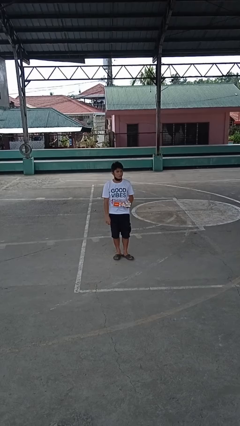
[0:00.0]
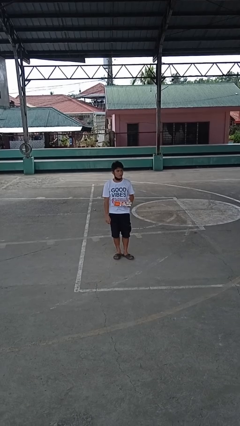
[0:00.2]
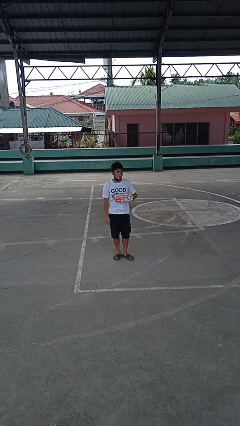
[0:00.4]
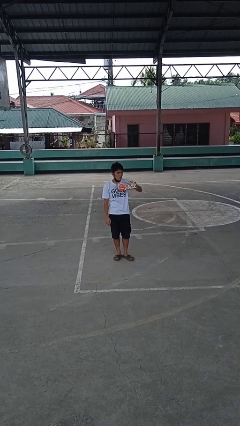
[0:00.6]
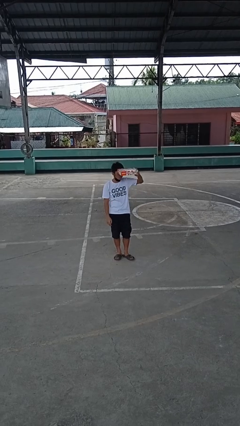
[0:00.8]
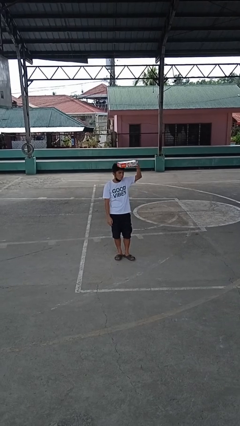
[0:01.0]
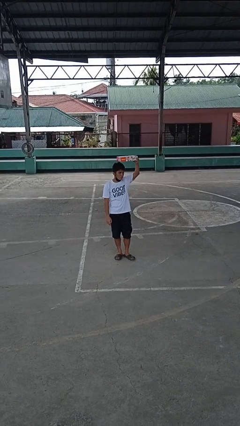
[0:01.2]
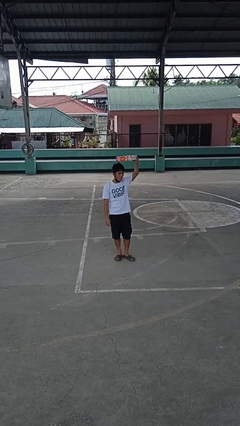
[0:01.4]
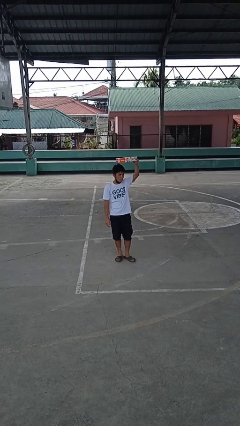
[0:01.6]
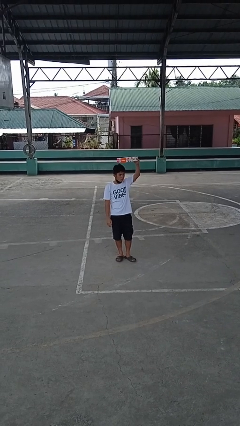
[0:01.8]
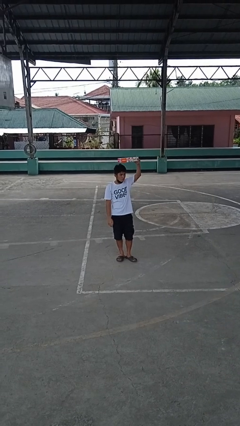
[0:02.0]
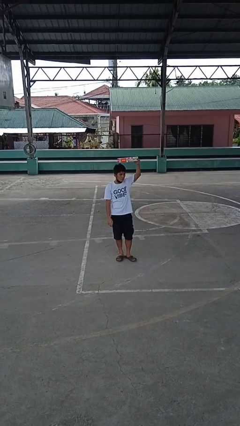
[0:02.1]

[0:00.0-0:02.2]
person holds object above head

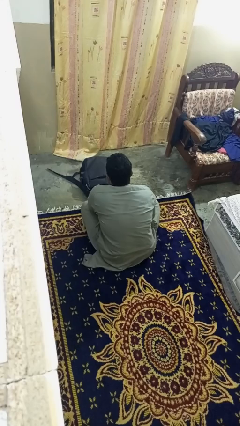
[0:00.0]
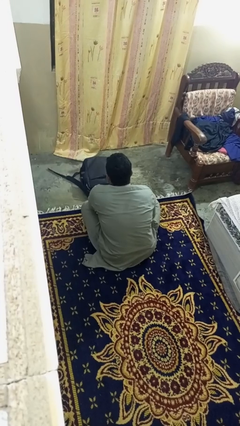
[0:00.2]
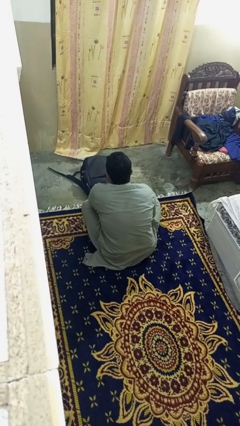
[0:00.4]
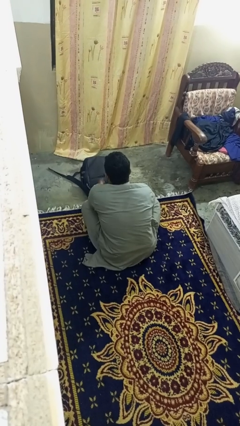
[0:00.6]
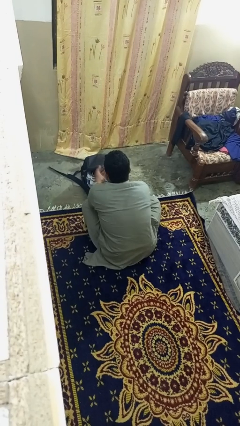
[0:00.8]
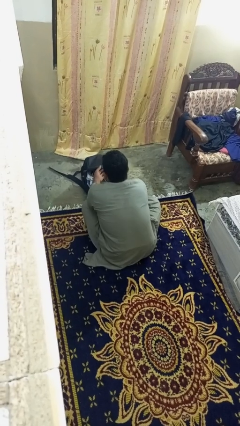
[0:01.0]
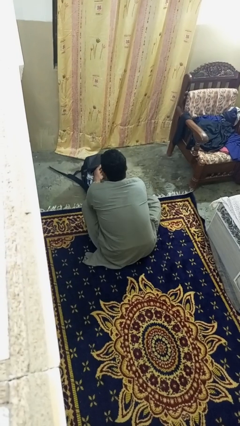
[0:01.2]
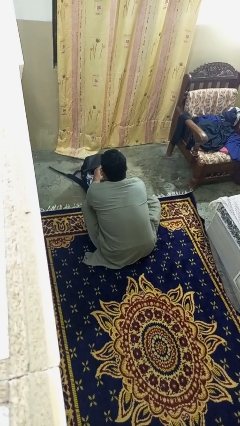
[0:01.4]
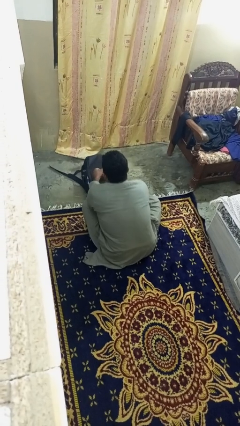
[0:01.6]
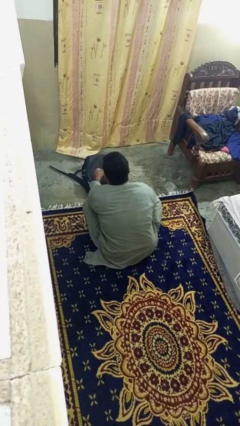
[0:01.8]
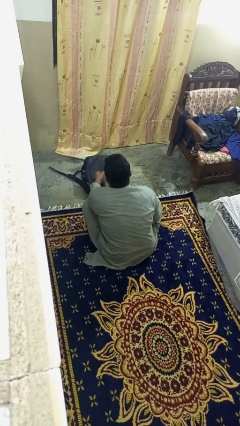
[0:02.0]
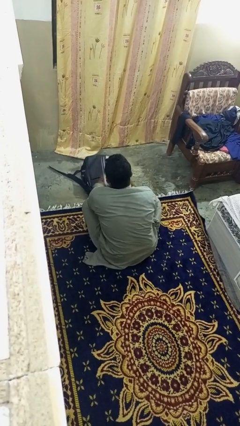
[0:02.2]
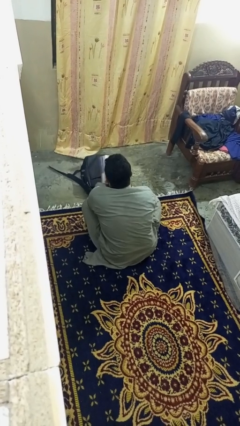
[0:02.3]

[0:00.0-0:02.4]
person takes object from bag

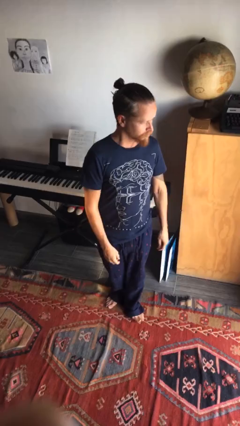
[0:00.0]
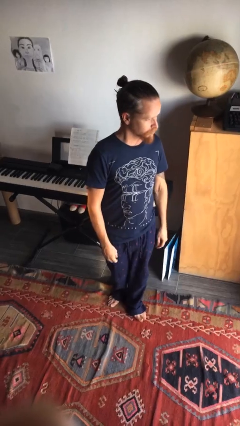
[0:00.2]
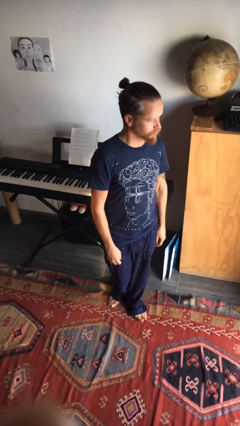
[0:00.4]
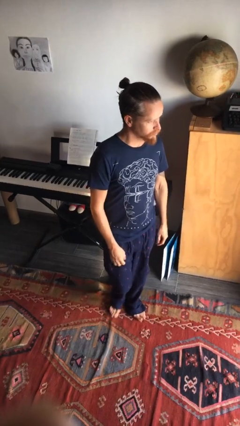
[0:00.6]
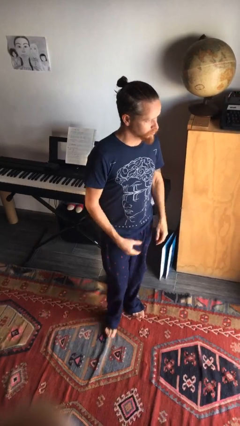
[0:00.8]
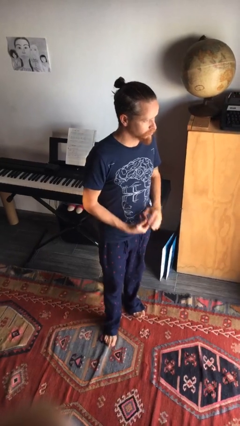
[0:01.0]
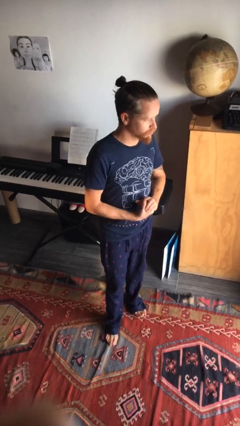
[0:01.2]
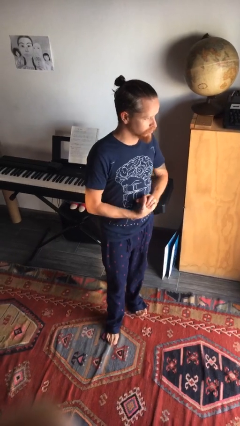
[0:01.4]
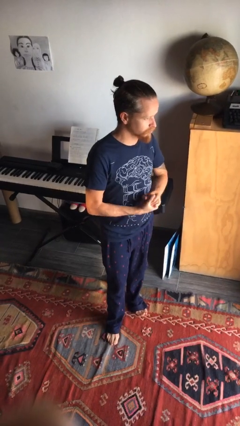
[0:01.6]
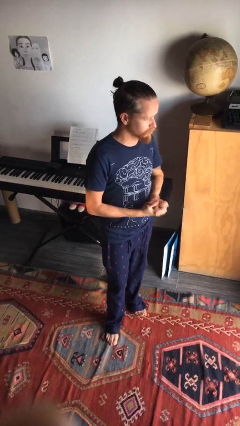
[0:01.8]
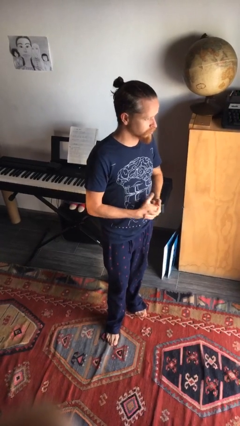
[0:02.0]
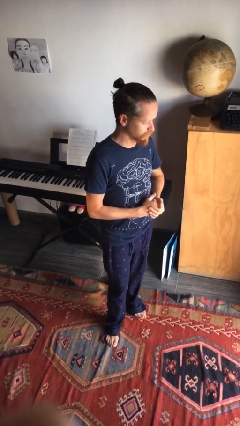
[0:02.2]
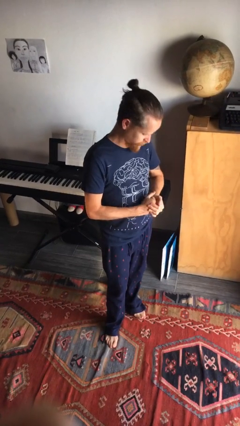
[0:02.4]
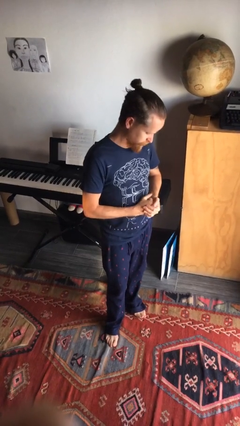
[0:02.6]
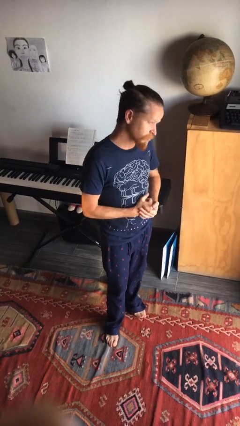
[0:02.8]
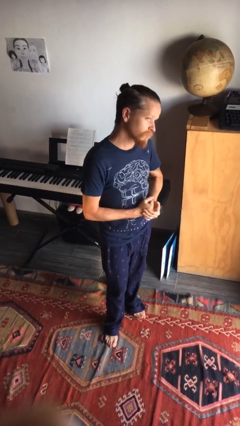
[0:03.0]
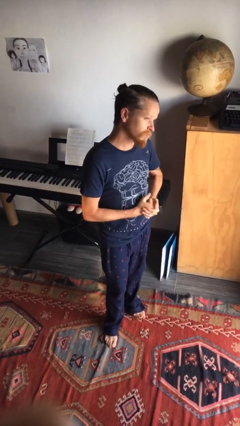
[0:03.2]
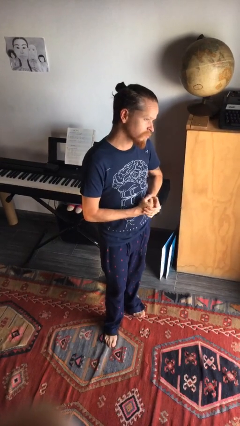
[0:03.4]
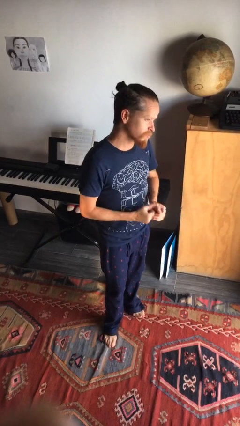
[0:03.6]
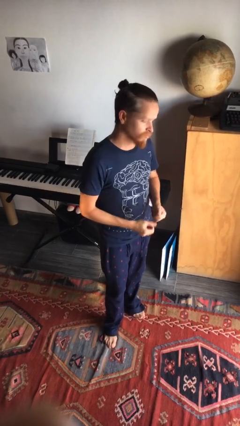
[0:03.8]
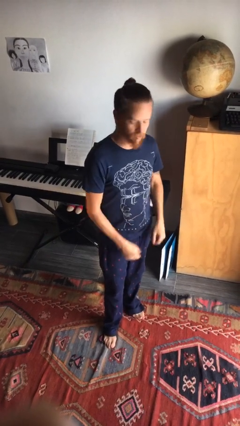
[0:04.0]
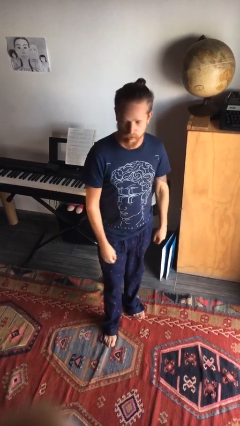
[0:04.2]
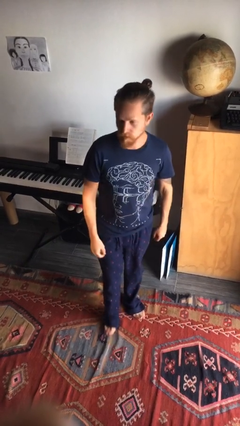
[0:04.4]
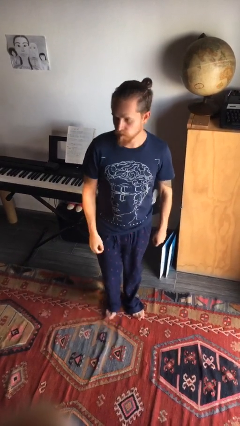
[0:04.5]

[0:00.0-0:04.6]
person cracks knuckles

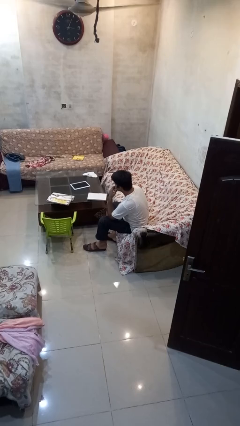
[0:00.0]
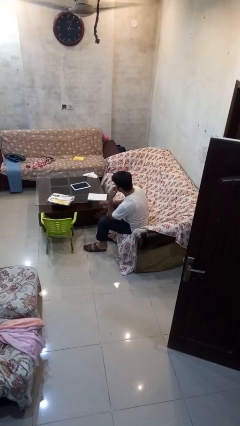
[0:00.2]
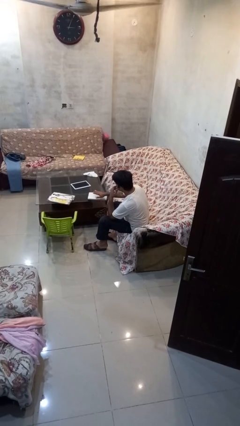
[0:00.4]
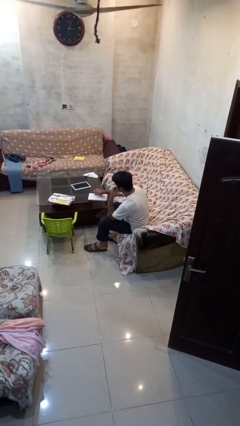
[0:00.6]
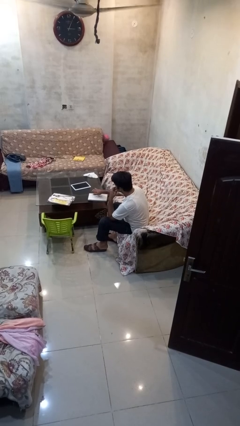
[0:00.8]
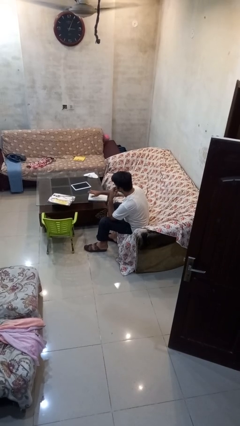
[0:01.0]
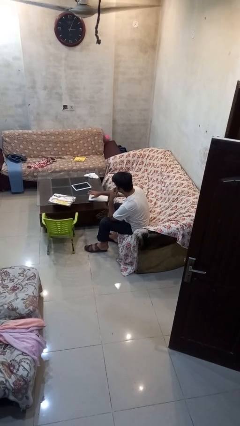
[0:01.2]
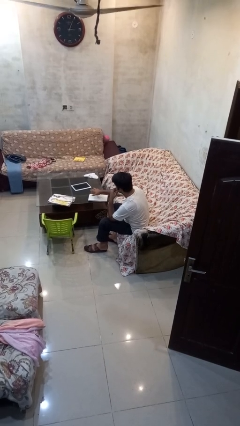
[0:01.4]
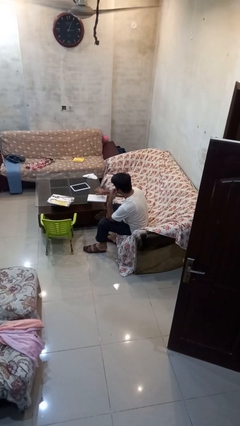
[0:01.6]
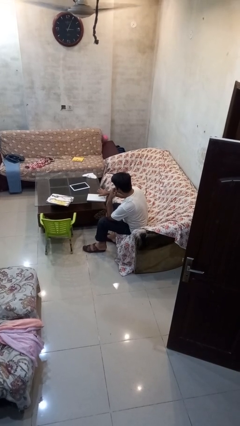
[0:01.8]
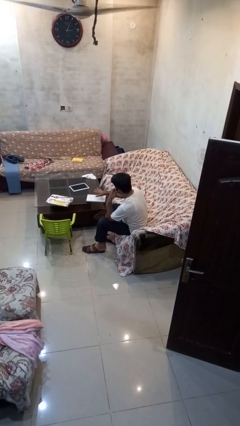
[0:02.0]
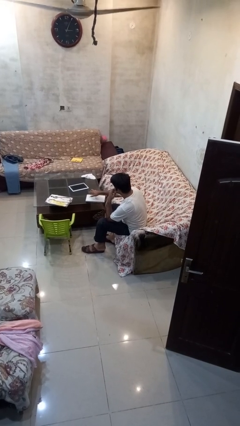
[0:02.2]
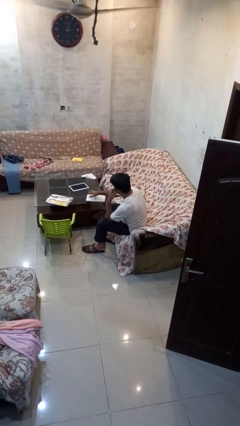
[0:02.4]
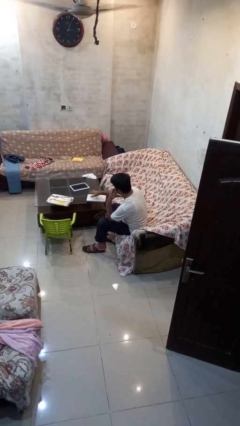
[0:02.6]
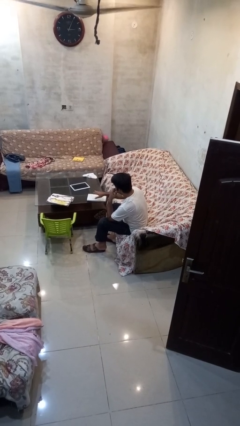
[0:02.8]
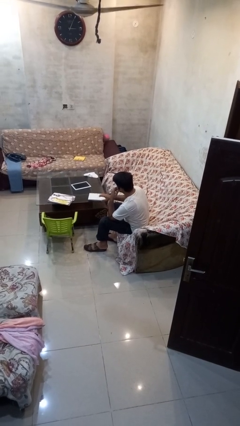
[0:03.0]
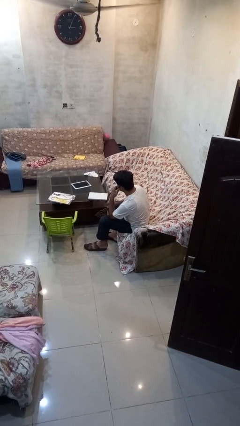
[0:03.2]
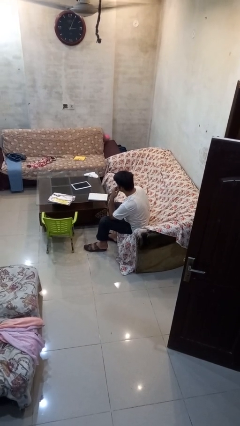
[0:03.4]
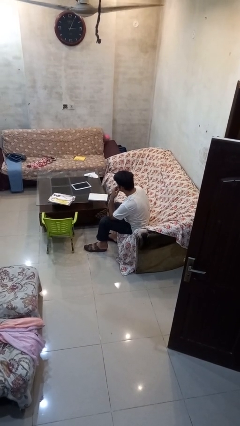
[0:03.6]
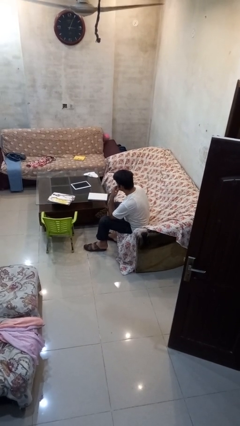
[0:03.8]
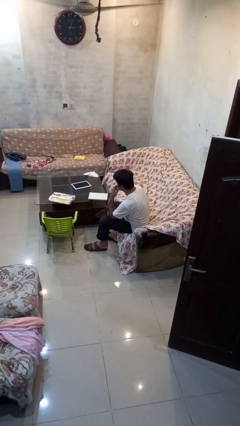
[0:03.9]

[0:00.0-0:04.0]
person waves hand over object

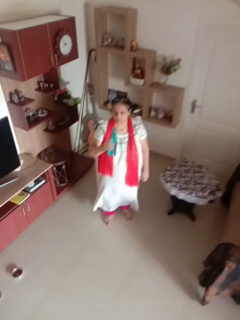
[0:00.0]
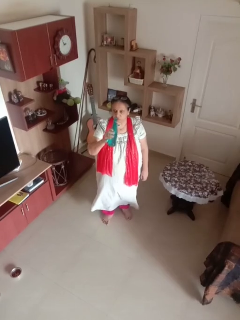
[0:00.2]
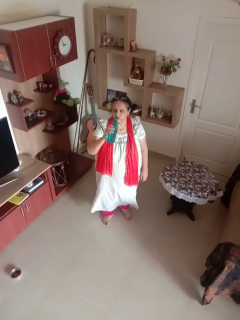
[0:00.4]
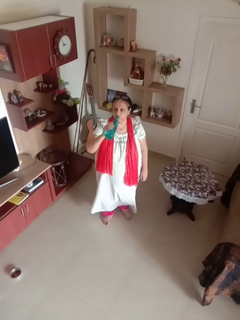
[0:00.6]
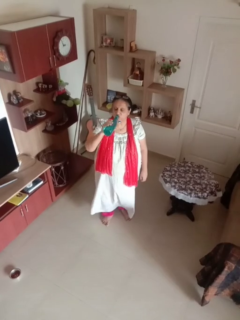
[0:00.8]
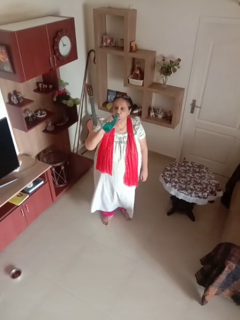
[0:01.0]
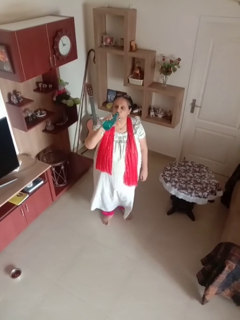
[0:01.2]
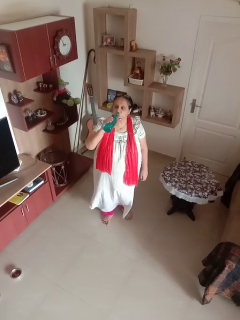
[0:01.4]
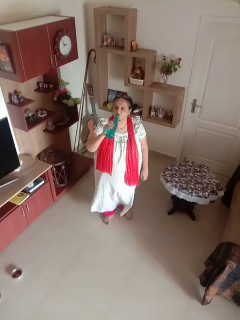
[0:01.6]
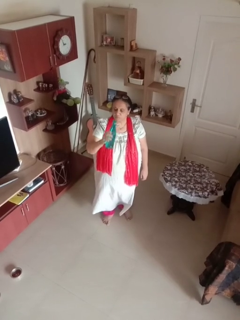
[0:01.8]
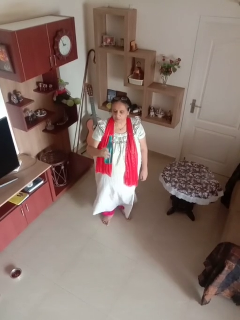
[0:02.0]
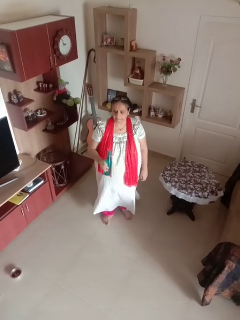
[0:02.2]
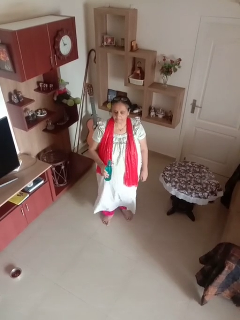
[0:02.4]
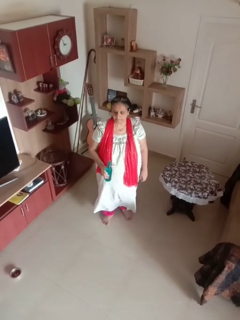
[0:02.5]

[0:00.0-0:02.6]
person drinks from bottle

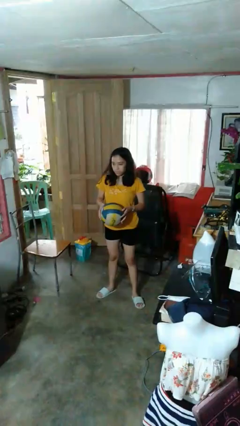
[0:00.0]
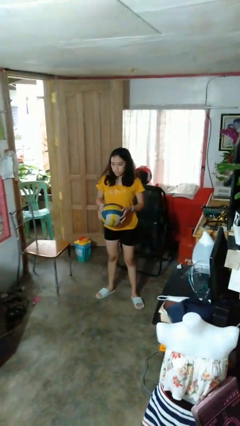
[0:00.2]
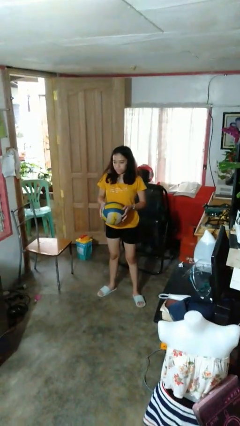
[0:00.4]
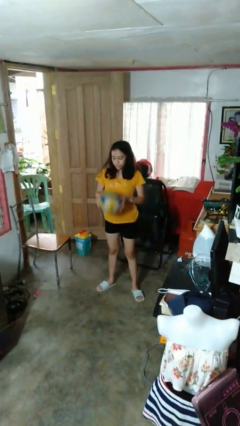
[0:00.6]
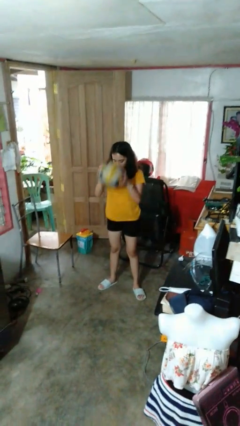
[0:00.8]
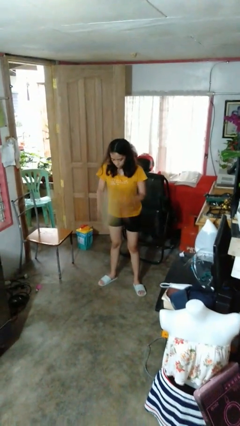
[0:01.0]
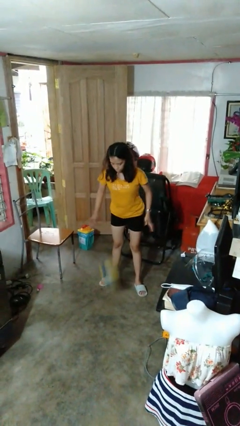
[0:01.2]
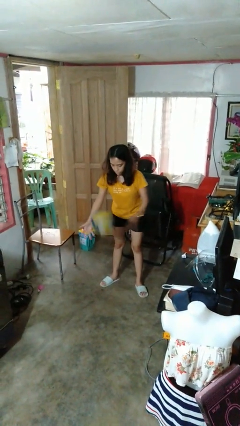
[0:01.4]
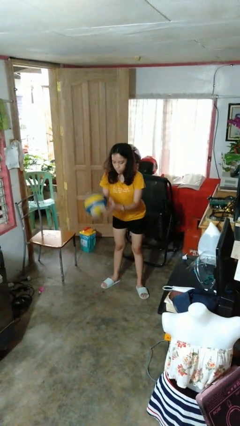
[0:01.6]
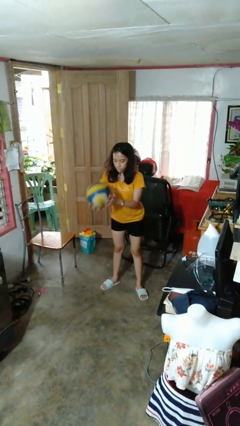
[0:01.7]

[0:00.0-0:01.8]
person bounces ball on floor
